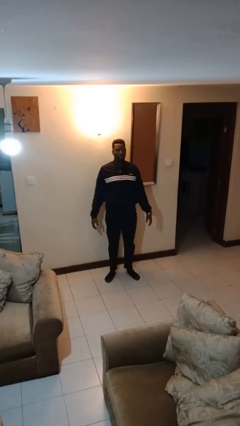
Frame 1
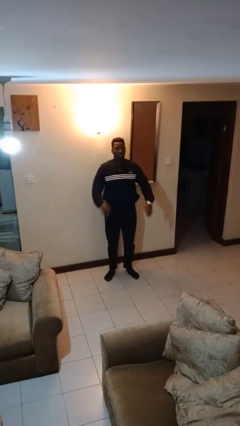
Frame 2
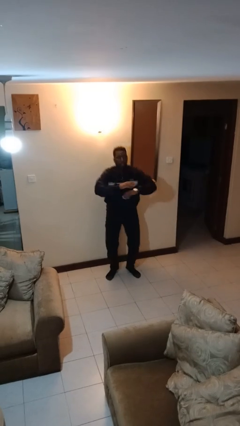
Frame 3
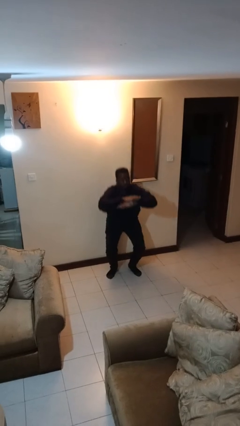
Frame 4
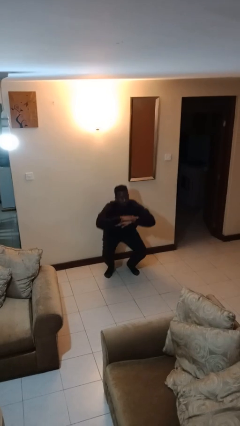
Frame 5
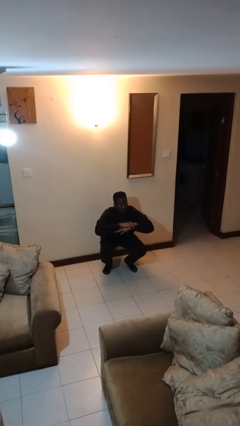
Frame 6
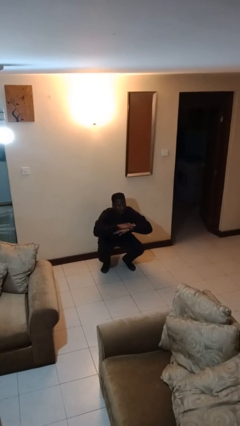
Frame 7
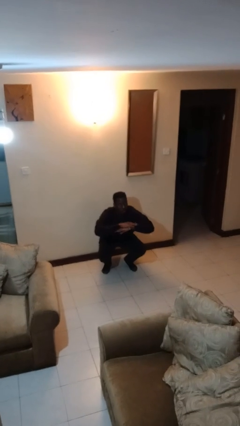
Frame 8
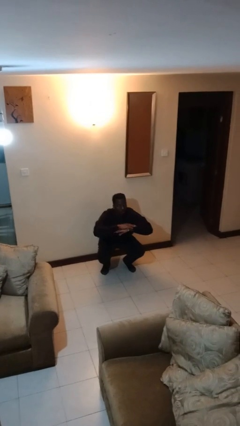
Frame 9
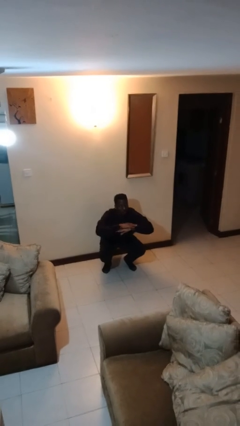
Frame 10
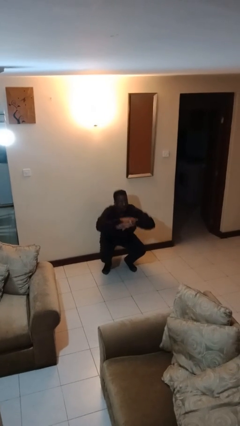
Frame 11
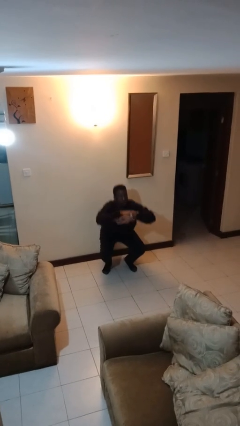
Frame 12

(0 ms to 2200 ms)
person squats

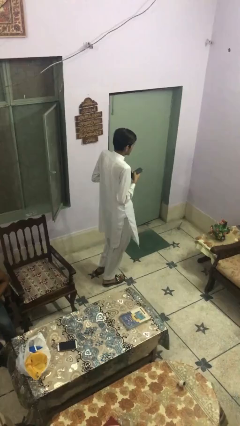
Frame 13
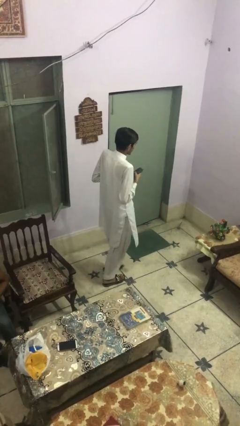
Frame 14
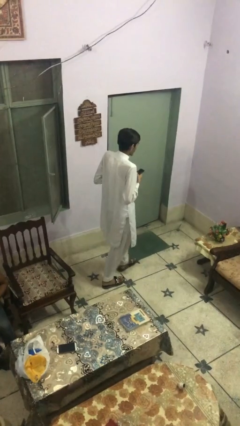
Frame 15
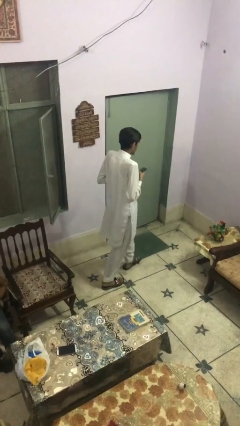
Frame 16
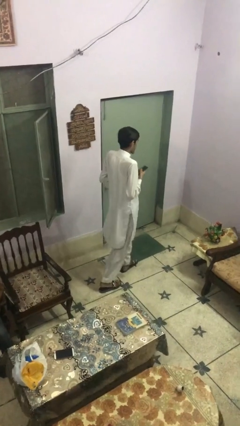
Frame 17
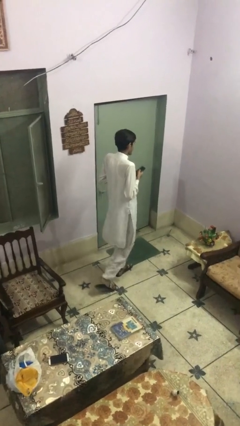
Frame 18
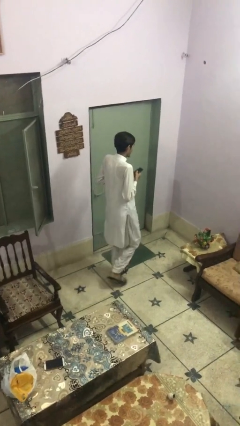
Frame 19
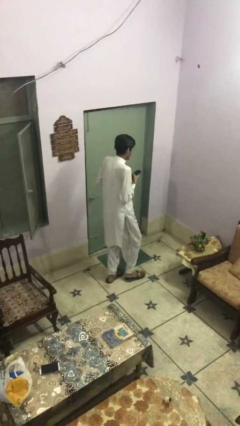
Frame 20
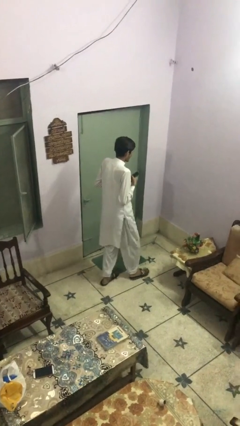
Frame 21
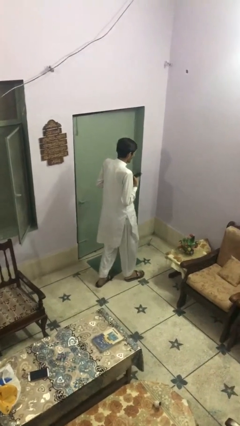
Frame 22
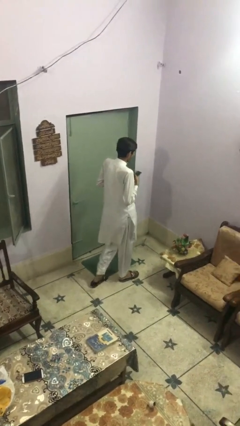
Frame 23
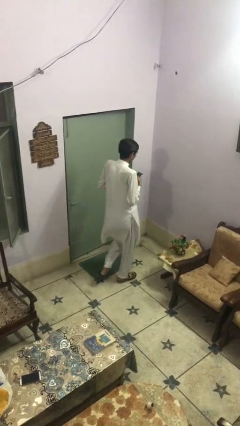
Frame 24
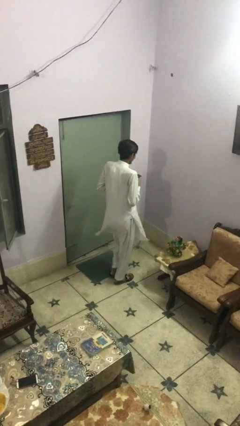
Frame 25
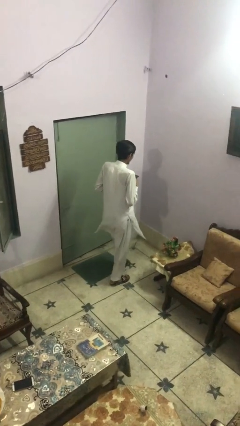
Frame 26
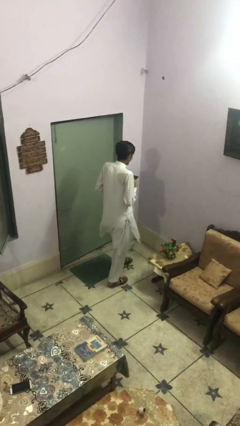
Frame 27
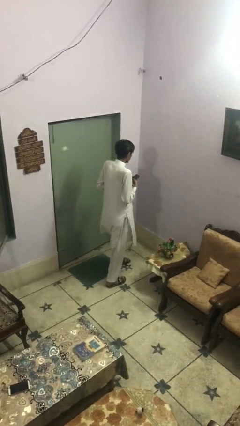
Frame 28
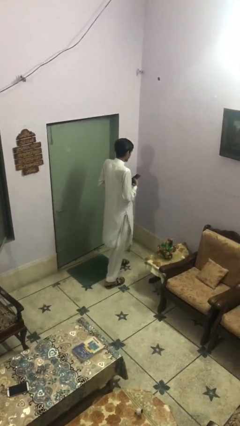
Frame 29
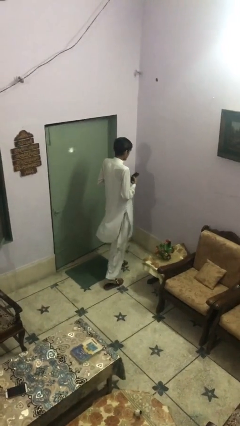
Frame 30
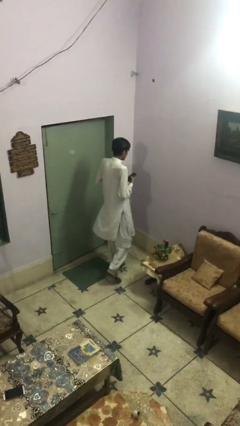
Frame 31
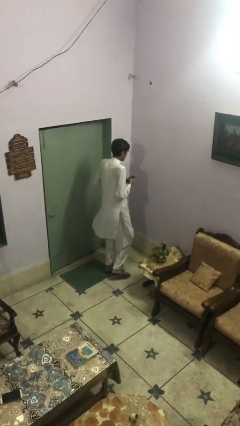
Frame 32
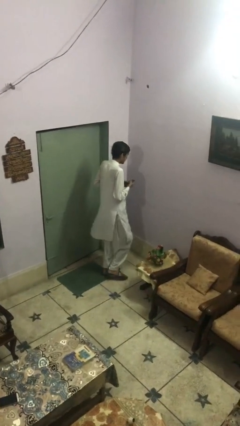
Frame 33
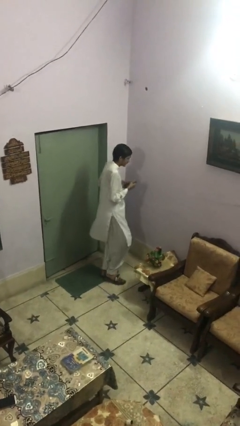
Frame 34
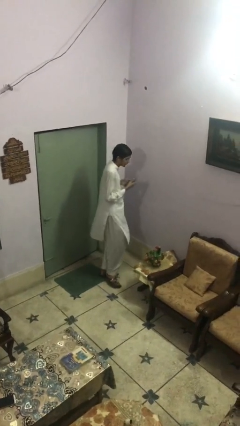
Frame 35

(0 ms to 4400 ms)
person texts on phone

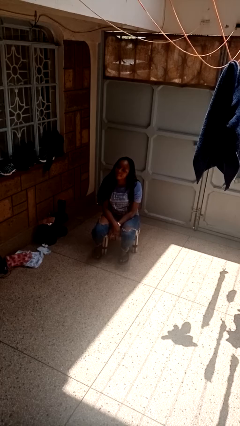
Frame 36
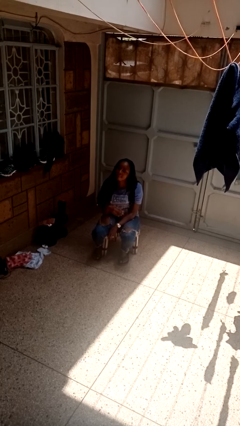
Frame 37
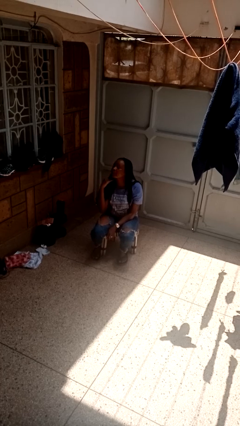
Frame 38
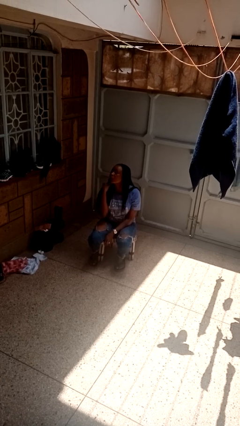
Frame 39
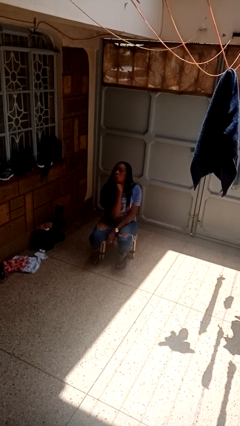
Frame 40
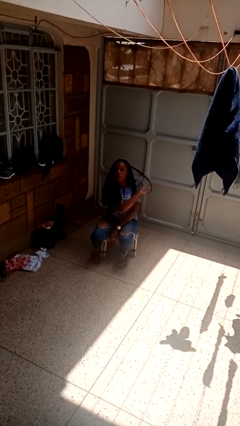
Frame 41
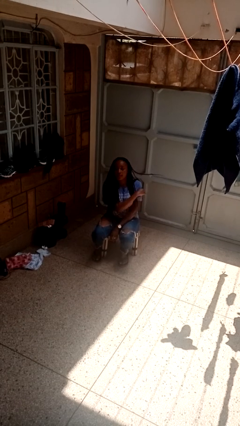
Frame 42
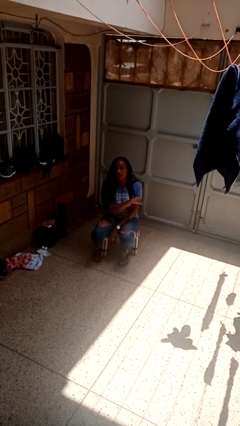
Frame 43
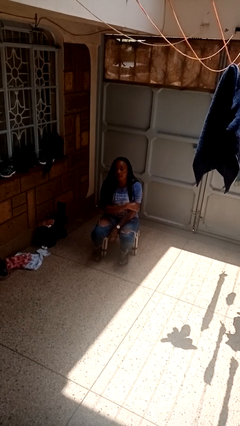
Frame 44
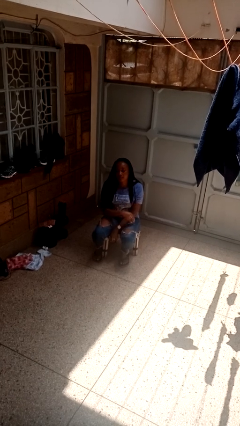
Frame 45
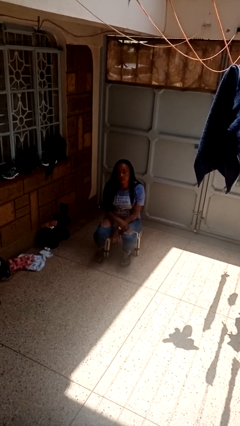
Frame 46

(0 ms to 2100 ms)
person gestures cut

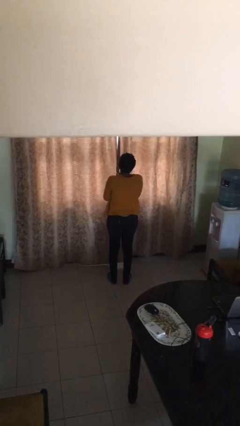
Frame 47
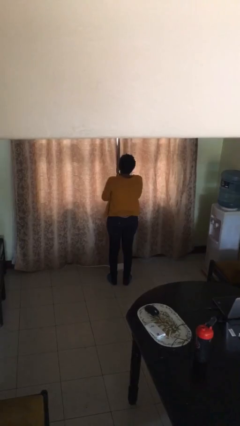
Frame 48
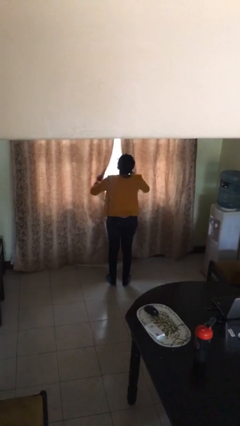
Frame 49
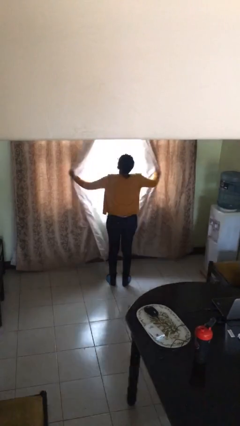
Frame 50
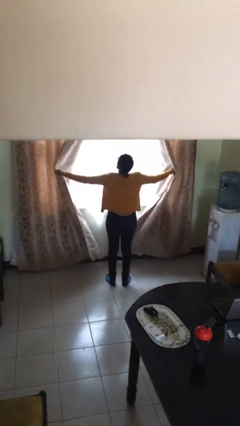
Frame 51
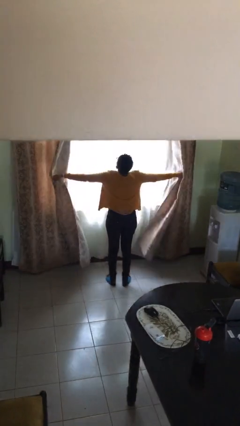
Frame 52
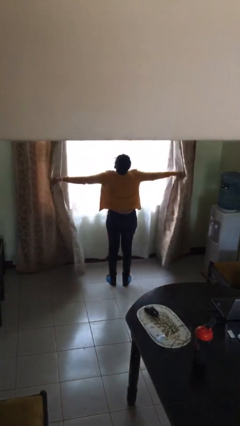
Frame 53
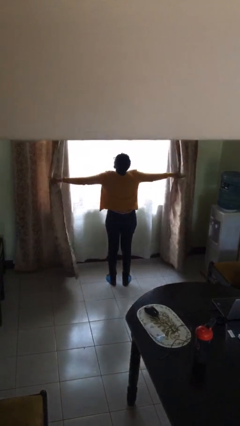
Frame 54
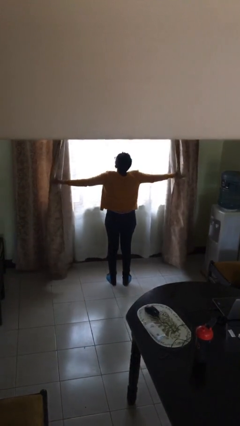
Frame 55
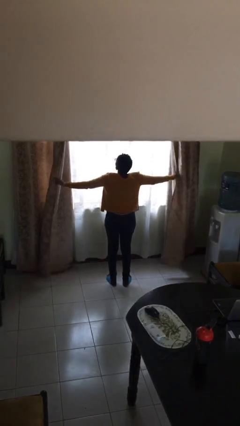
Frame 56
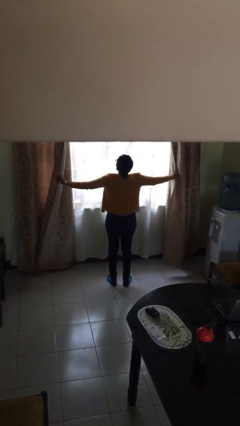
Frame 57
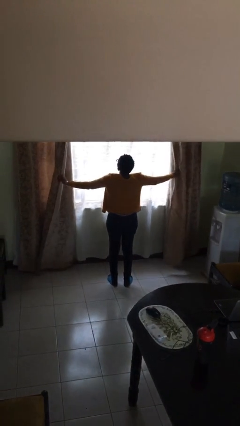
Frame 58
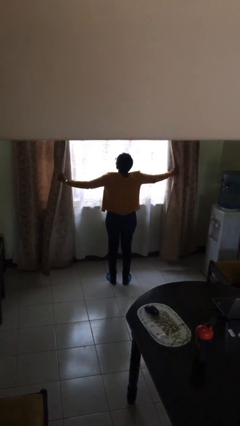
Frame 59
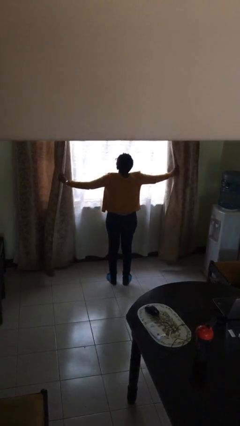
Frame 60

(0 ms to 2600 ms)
person opens curtains

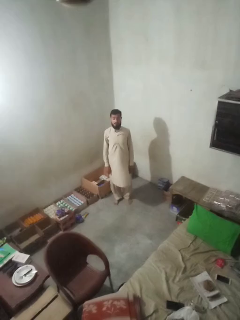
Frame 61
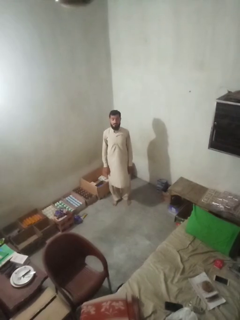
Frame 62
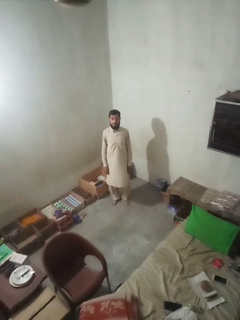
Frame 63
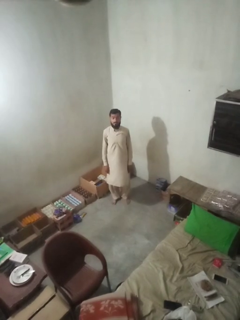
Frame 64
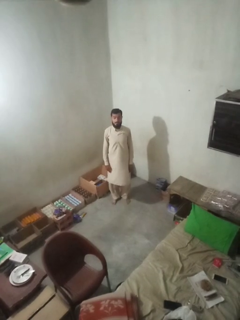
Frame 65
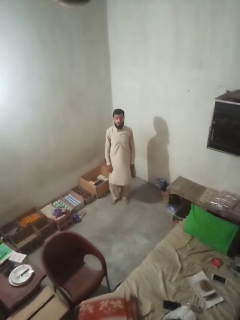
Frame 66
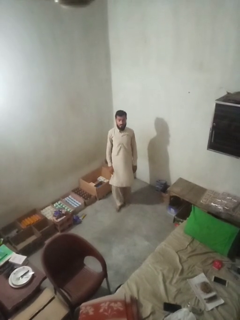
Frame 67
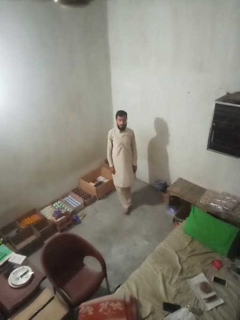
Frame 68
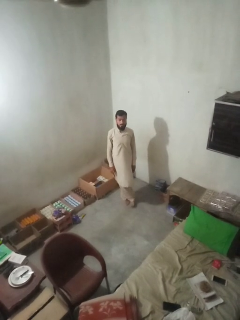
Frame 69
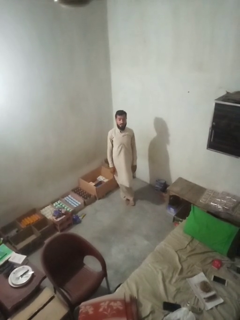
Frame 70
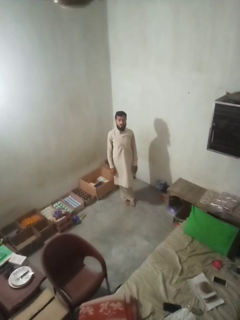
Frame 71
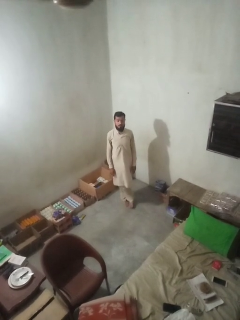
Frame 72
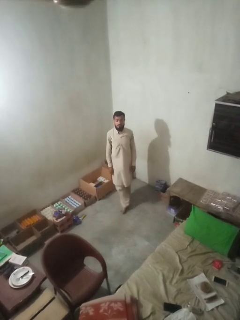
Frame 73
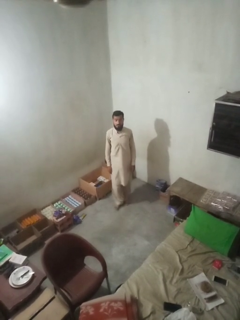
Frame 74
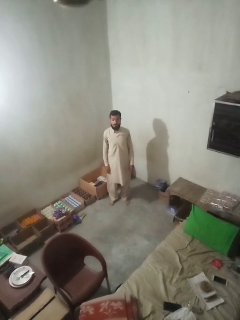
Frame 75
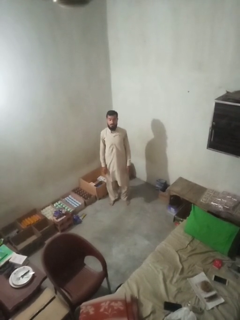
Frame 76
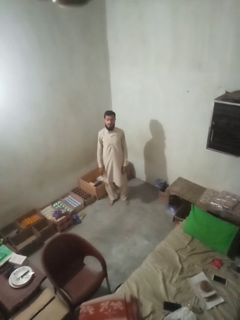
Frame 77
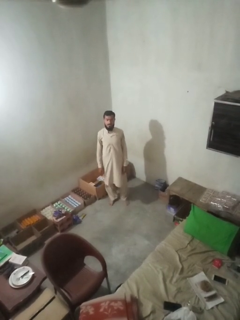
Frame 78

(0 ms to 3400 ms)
person crosses legs

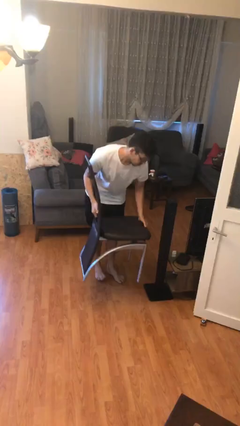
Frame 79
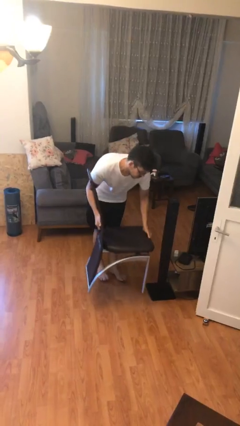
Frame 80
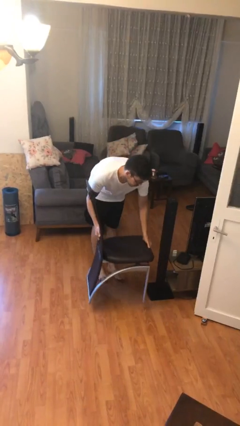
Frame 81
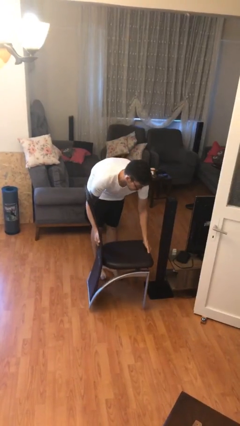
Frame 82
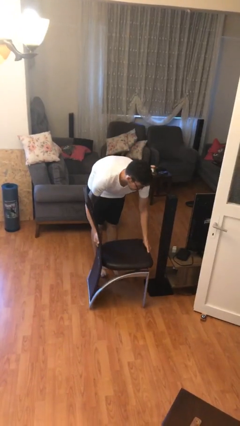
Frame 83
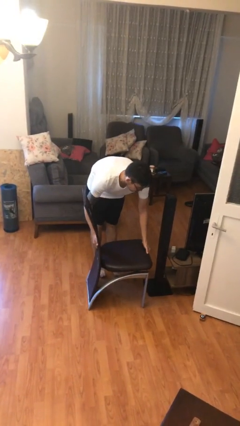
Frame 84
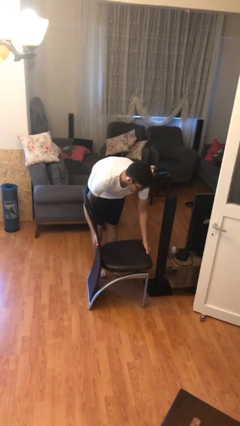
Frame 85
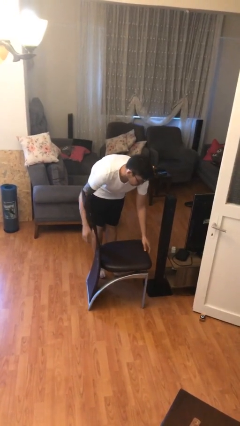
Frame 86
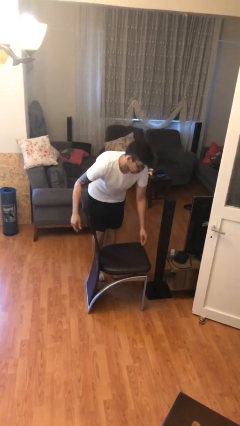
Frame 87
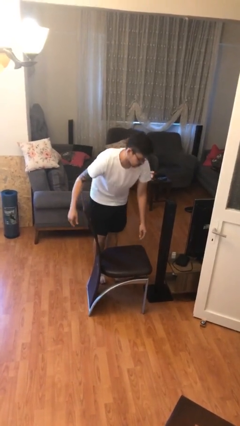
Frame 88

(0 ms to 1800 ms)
person puts down object on floor

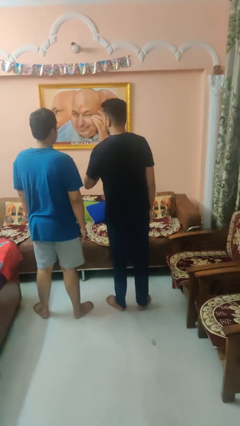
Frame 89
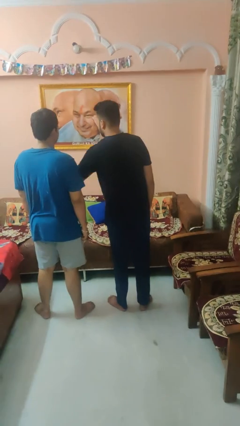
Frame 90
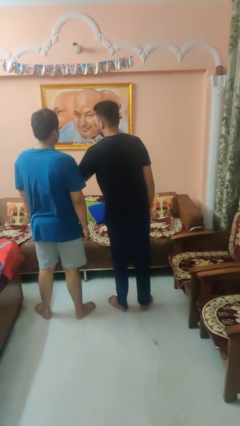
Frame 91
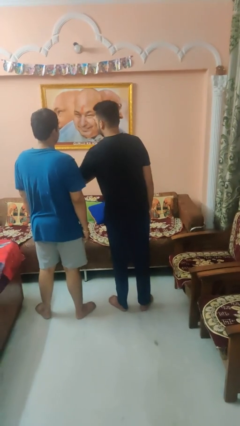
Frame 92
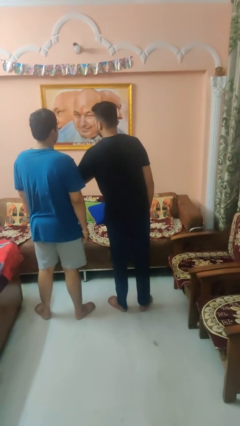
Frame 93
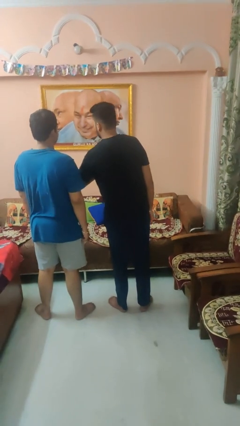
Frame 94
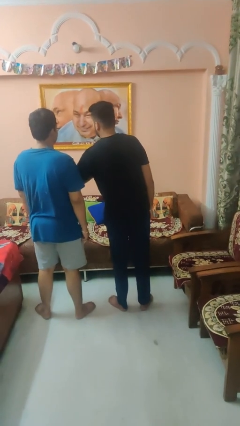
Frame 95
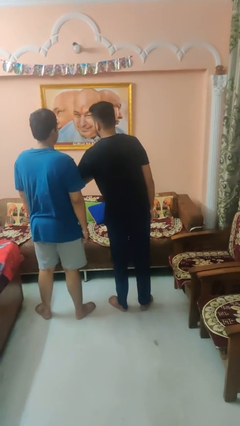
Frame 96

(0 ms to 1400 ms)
person nudges person with elbow
